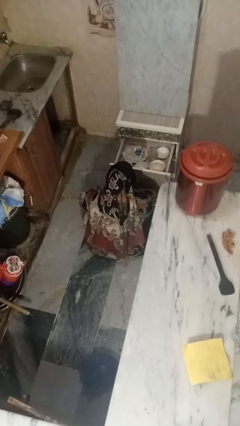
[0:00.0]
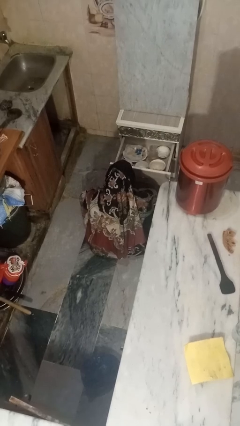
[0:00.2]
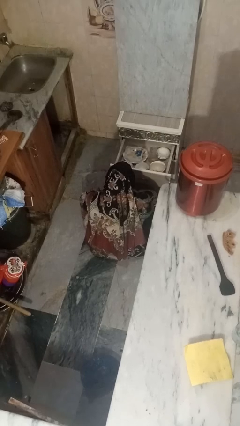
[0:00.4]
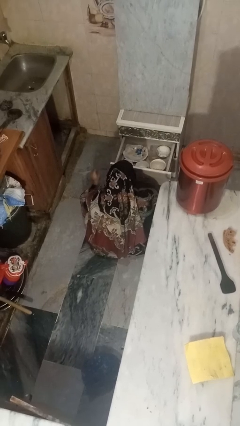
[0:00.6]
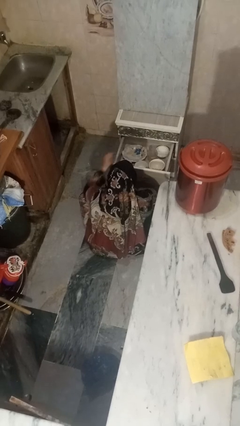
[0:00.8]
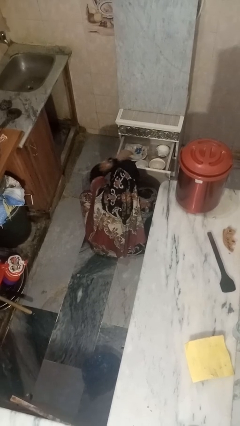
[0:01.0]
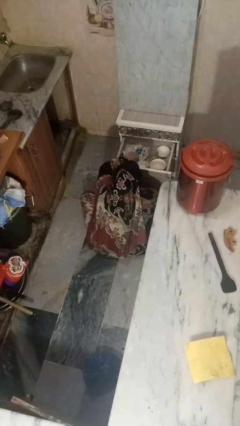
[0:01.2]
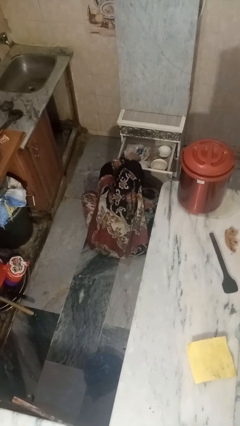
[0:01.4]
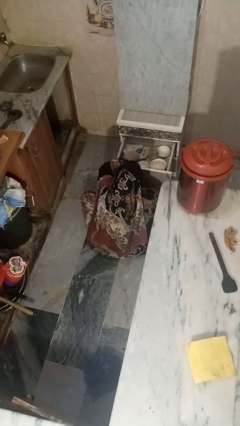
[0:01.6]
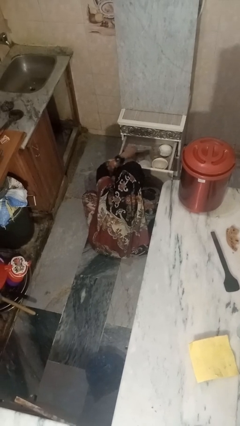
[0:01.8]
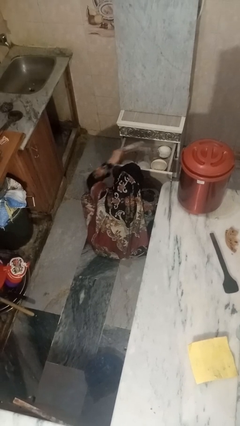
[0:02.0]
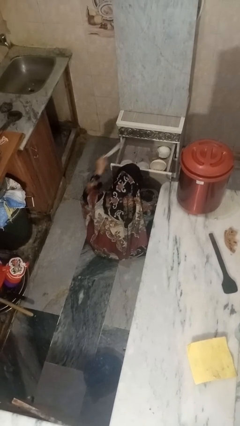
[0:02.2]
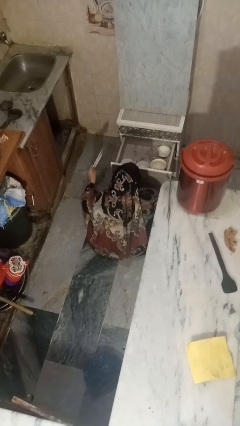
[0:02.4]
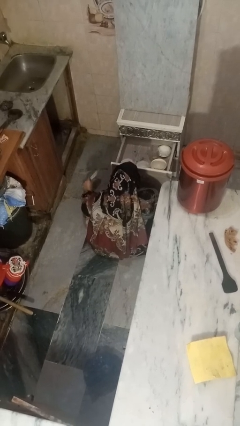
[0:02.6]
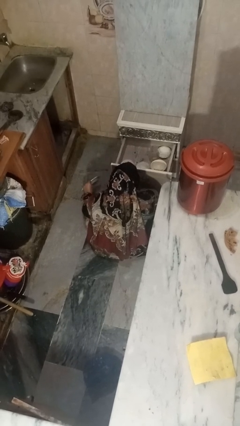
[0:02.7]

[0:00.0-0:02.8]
person takes object from kitchen drawer

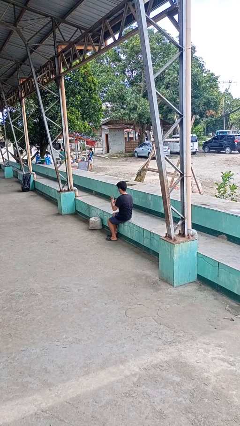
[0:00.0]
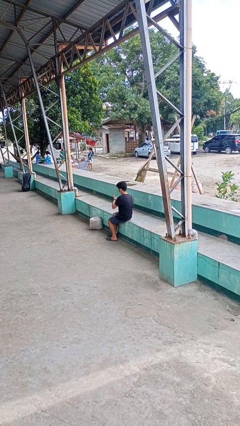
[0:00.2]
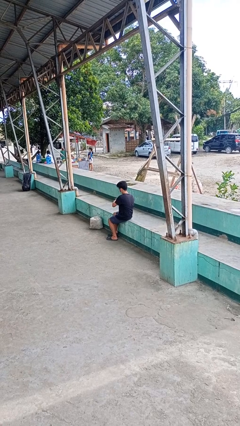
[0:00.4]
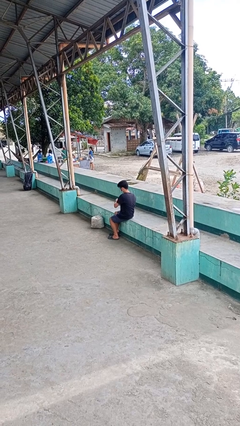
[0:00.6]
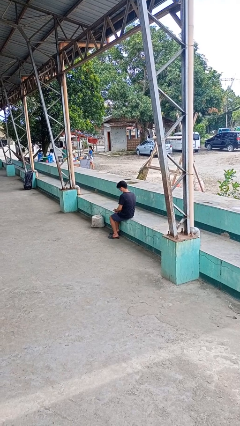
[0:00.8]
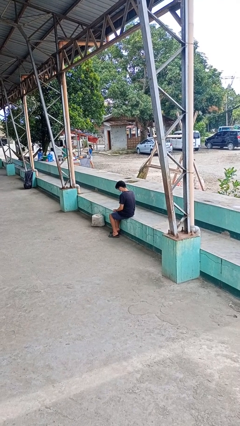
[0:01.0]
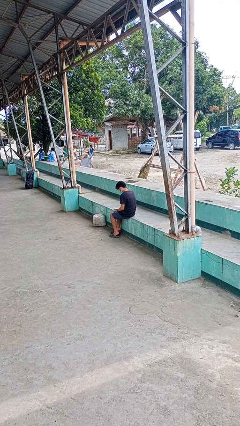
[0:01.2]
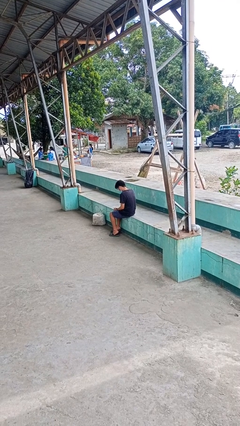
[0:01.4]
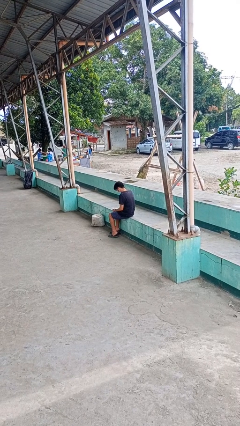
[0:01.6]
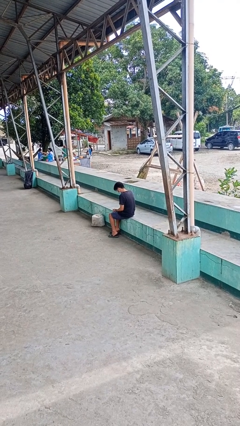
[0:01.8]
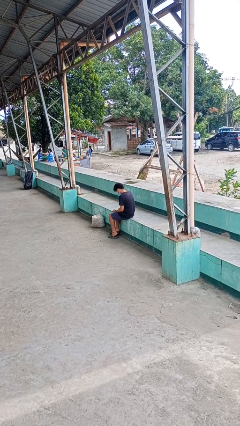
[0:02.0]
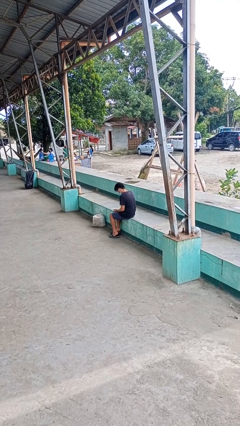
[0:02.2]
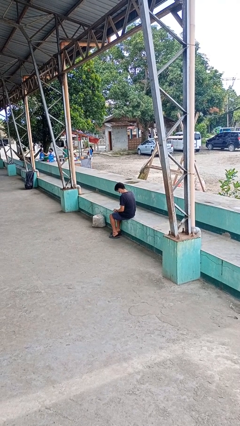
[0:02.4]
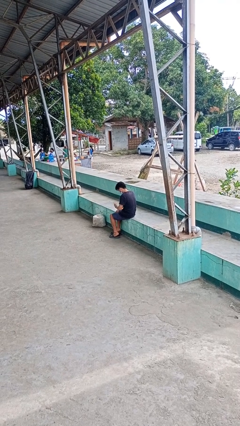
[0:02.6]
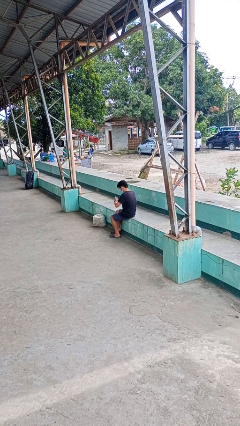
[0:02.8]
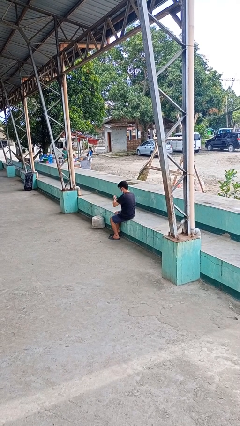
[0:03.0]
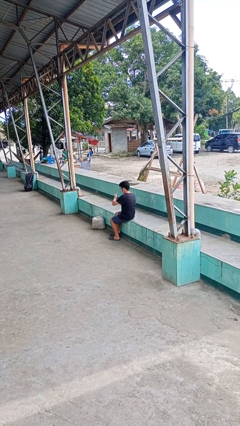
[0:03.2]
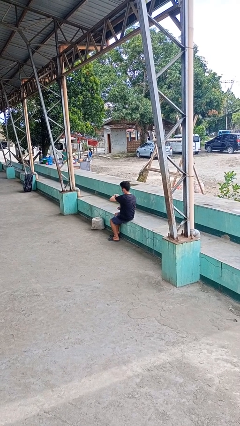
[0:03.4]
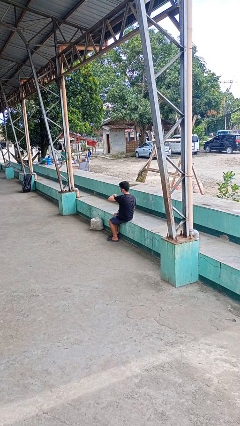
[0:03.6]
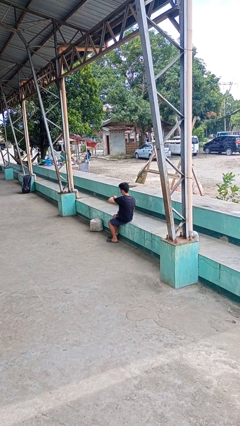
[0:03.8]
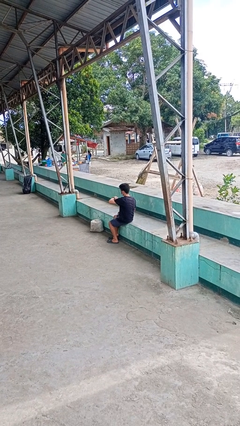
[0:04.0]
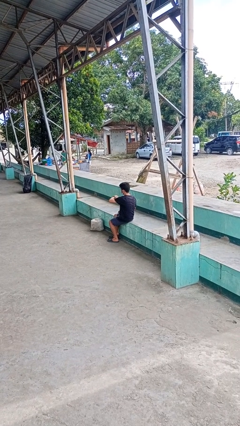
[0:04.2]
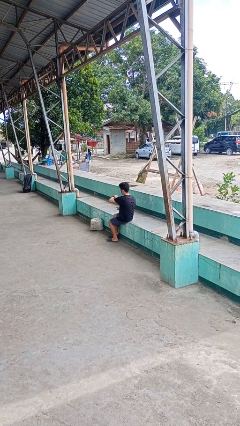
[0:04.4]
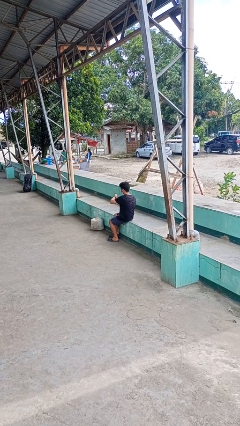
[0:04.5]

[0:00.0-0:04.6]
person puts on wristwatch

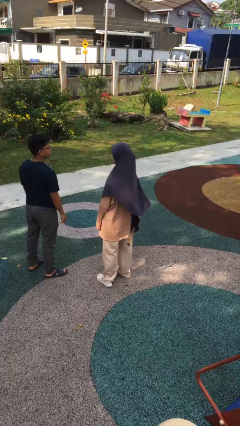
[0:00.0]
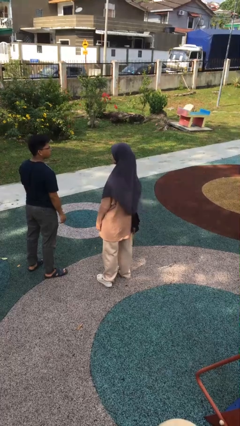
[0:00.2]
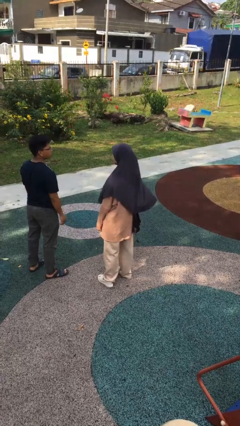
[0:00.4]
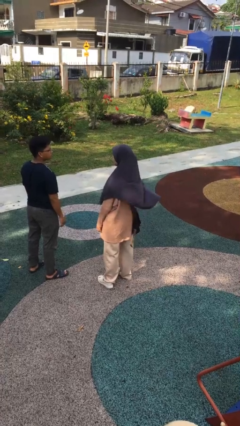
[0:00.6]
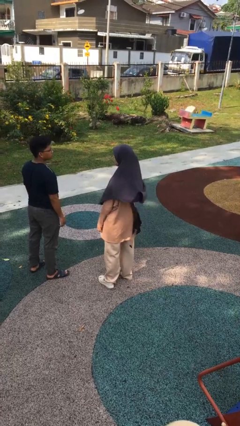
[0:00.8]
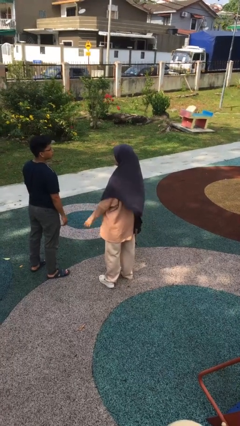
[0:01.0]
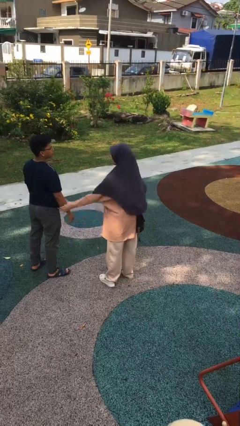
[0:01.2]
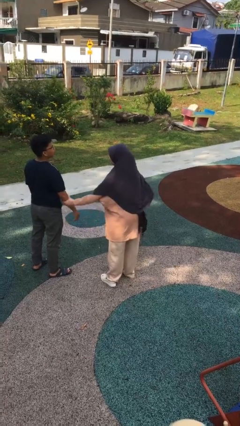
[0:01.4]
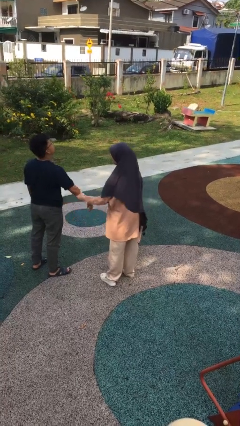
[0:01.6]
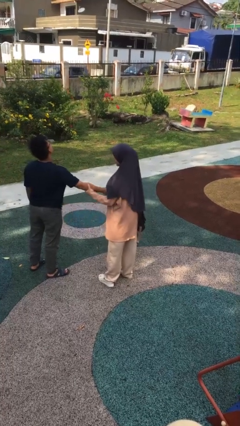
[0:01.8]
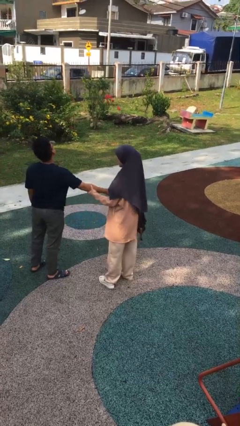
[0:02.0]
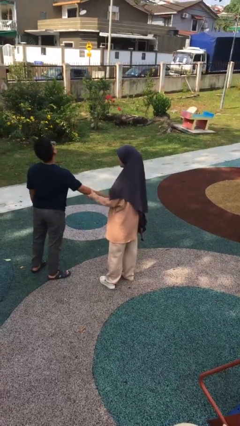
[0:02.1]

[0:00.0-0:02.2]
person grabs person by forearm

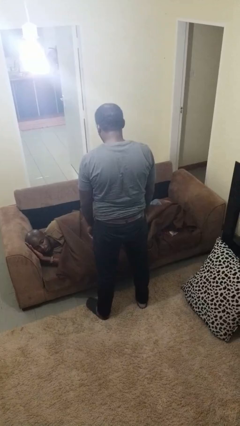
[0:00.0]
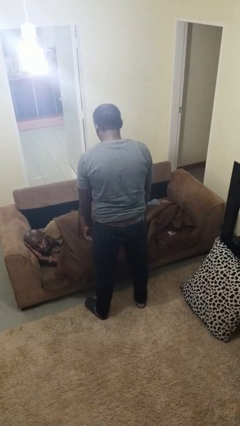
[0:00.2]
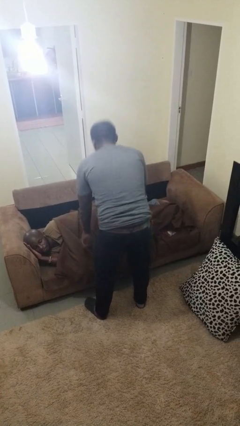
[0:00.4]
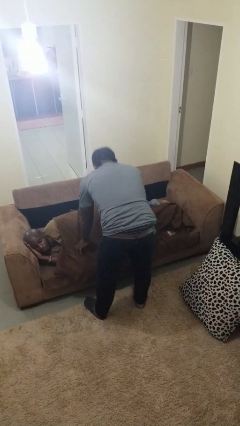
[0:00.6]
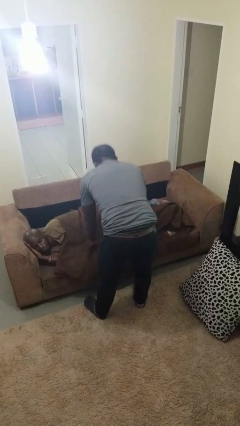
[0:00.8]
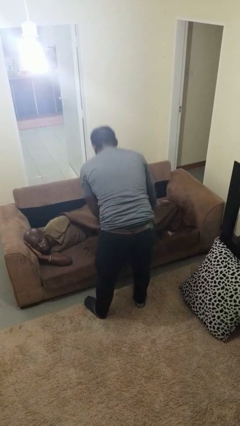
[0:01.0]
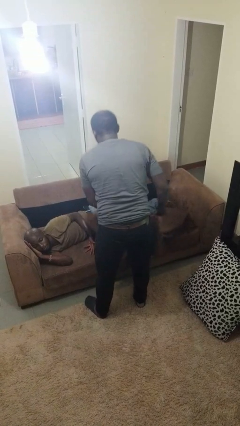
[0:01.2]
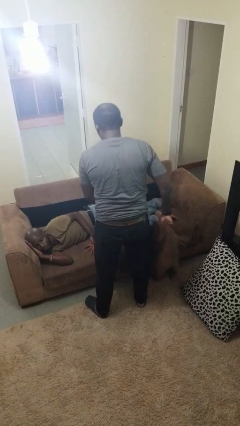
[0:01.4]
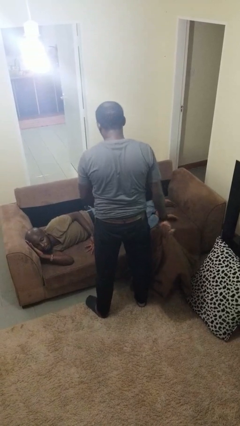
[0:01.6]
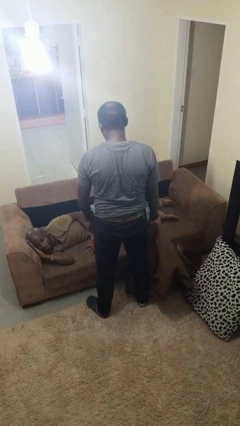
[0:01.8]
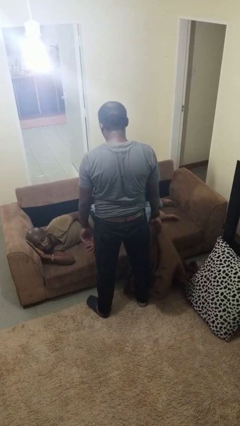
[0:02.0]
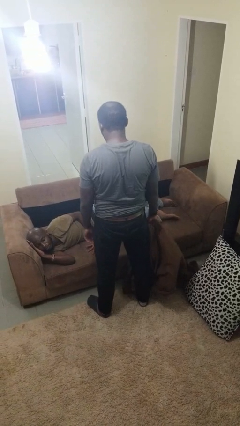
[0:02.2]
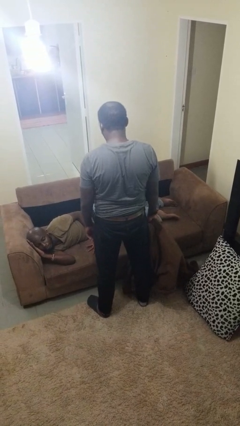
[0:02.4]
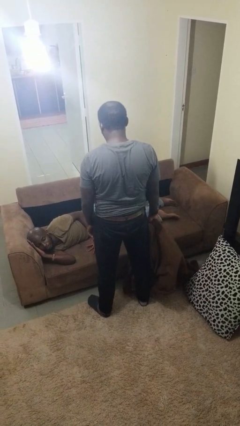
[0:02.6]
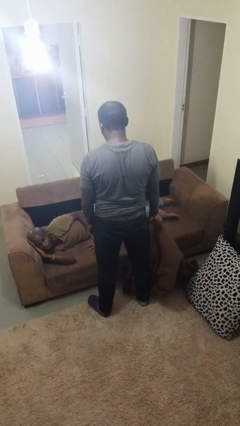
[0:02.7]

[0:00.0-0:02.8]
person uncovers friend with blanket

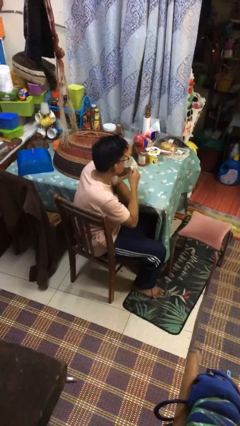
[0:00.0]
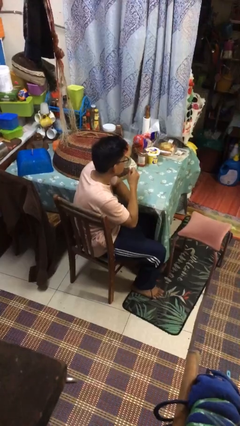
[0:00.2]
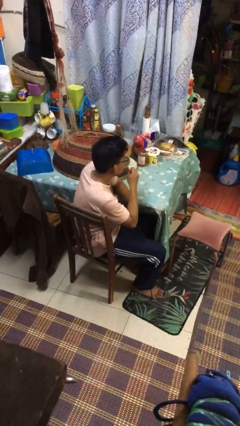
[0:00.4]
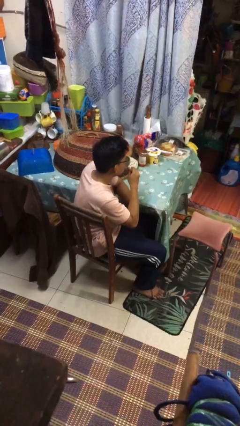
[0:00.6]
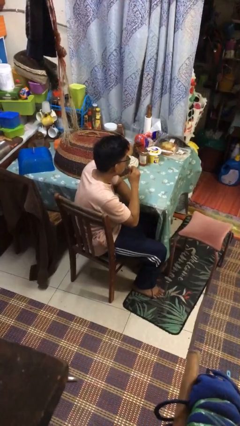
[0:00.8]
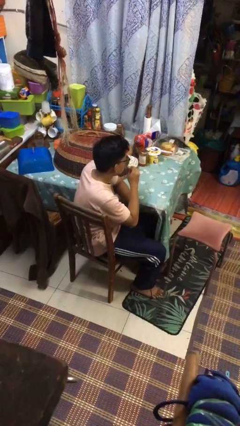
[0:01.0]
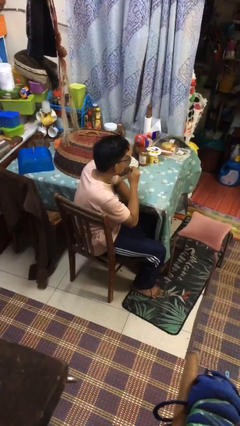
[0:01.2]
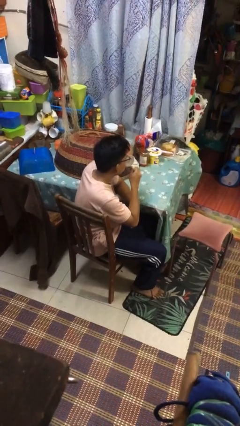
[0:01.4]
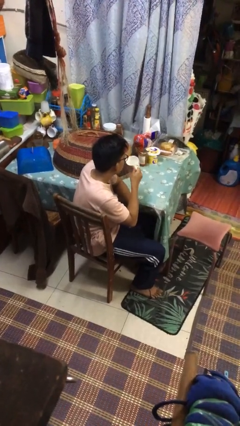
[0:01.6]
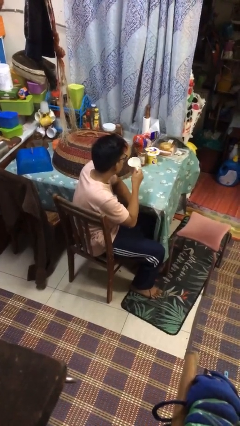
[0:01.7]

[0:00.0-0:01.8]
person drinks from mug

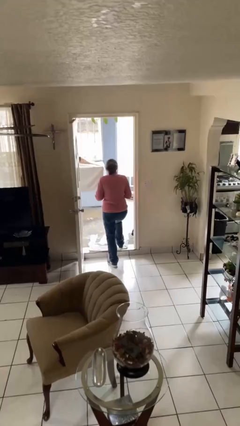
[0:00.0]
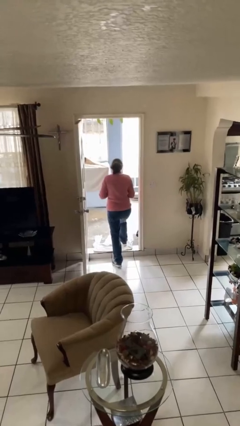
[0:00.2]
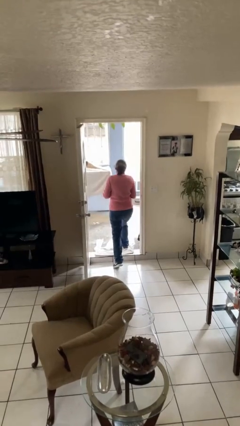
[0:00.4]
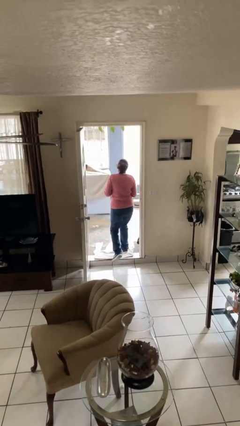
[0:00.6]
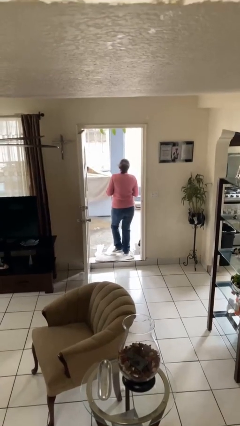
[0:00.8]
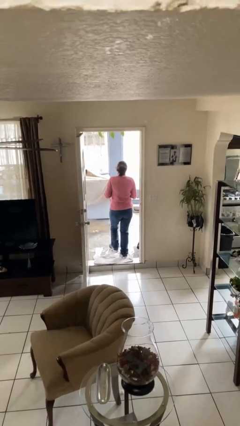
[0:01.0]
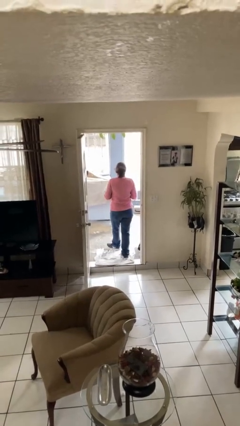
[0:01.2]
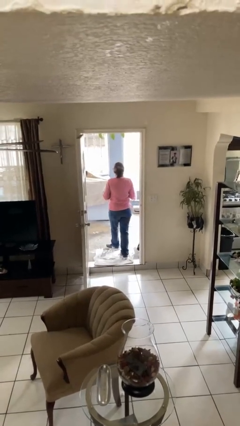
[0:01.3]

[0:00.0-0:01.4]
person exits scene through structure

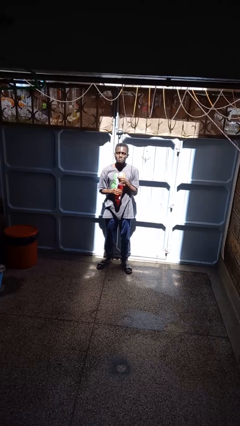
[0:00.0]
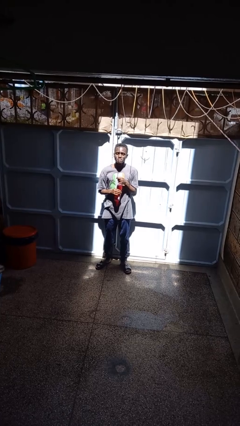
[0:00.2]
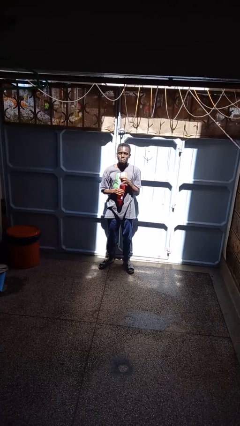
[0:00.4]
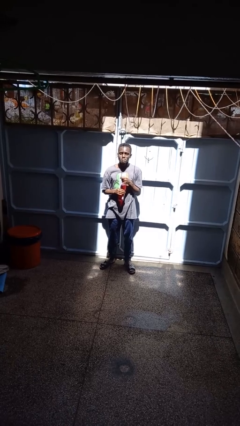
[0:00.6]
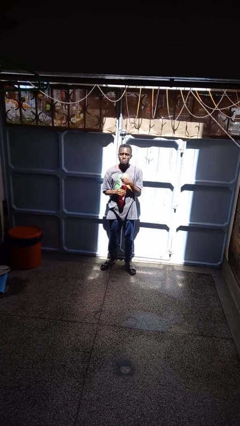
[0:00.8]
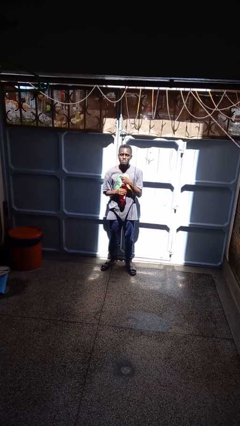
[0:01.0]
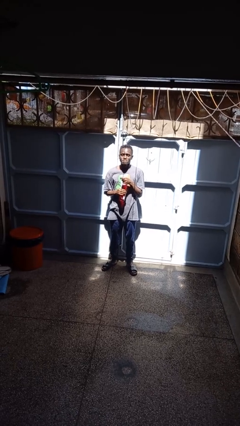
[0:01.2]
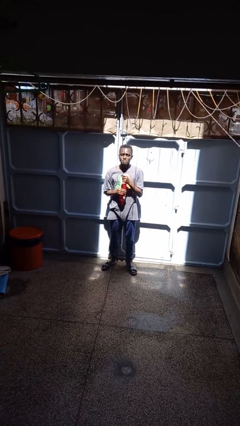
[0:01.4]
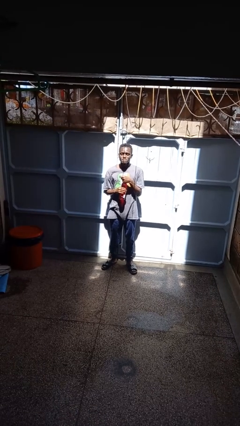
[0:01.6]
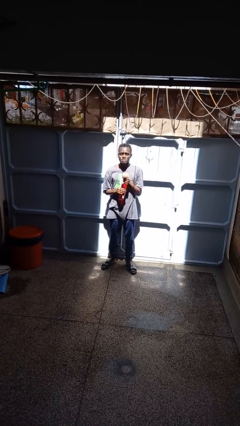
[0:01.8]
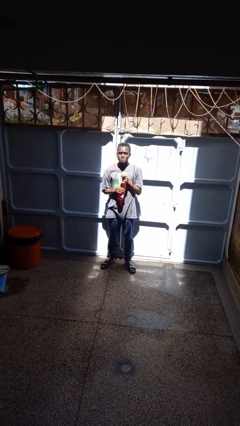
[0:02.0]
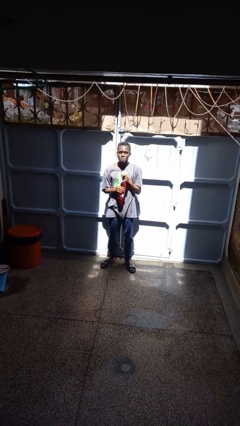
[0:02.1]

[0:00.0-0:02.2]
person opens beverage can
